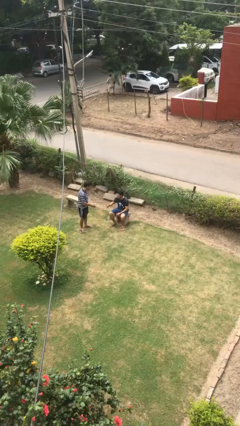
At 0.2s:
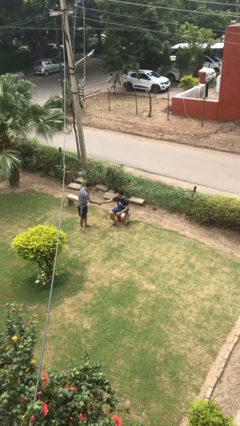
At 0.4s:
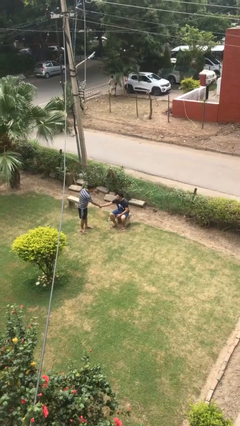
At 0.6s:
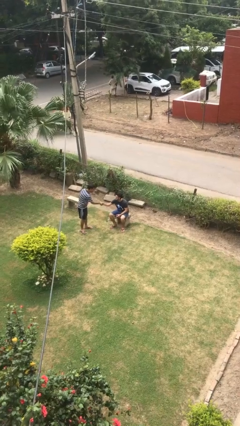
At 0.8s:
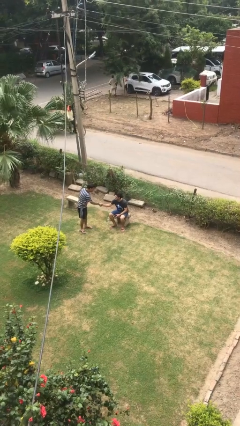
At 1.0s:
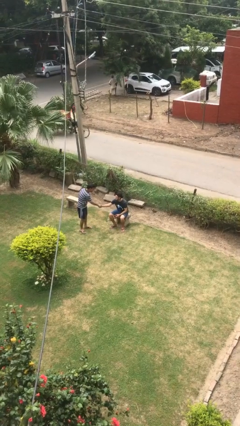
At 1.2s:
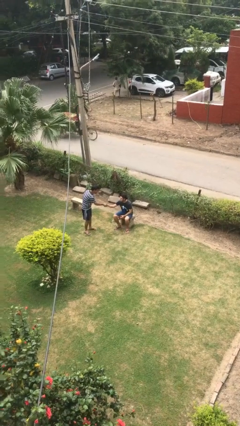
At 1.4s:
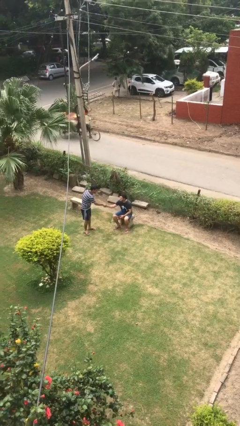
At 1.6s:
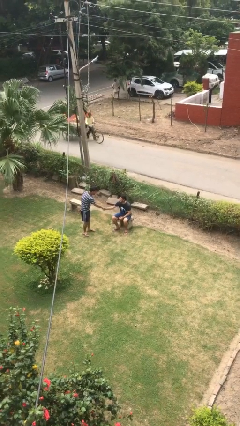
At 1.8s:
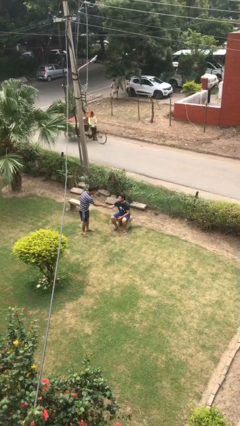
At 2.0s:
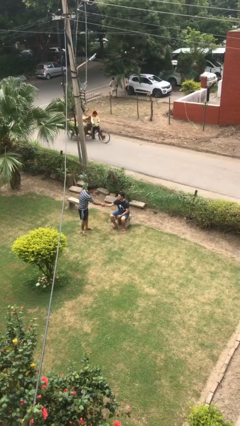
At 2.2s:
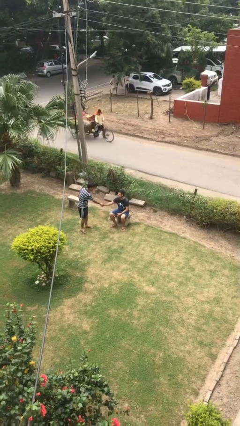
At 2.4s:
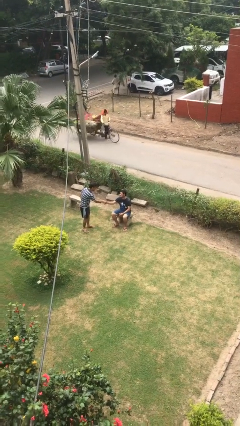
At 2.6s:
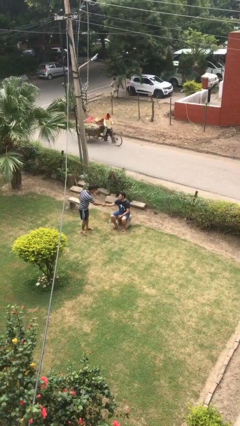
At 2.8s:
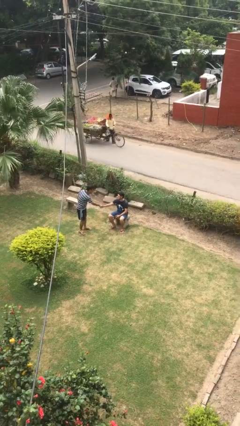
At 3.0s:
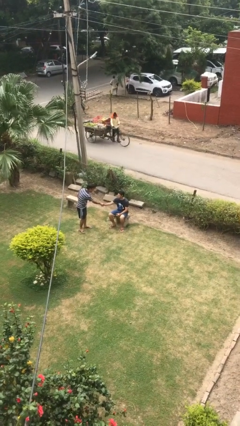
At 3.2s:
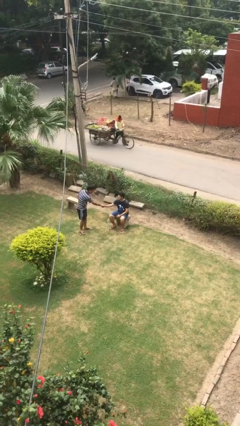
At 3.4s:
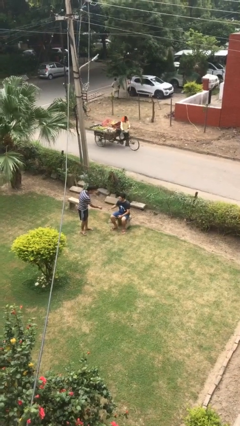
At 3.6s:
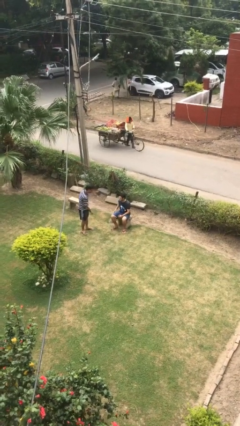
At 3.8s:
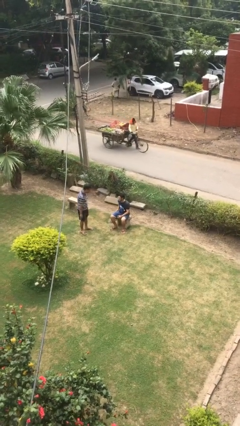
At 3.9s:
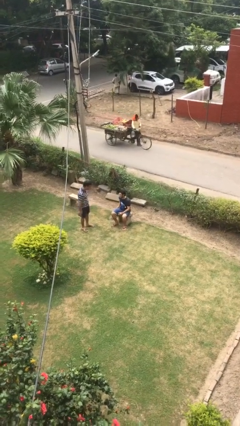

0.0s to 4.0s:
person shakes hand

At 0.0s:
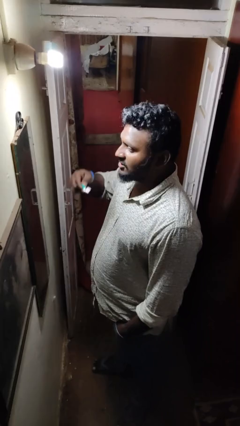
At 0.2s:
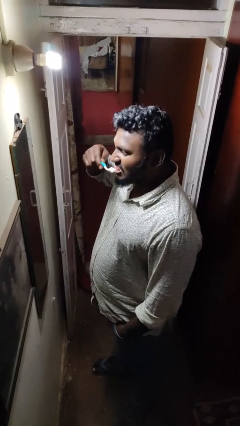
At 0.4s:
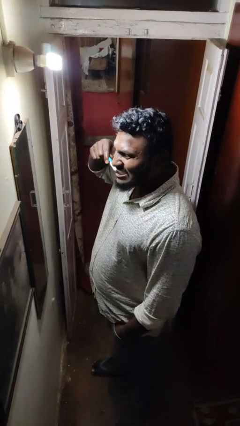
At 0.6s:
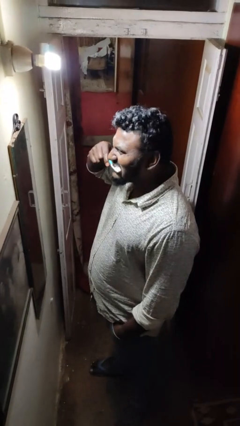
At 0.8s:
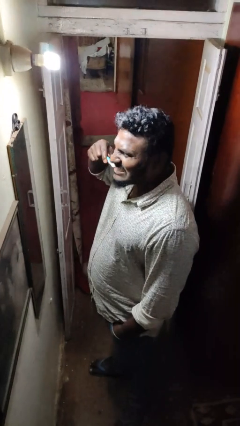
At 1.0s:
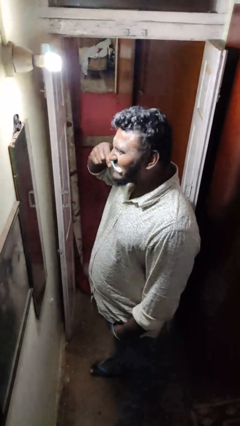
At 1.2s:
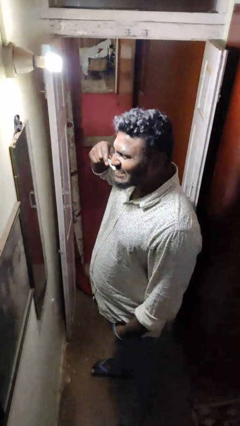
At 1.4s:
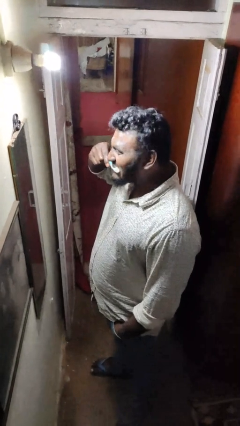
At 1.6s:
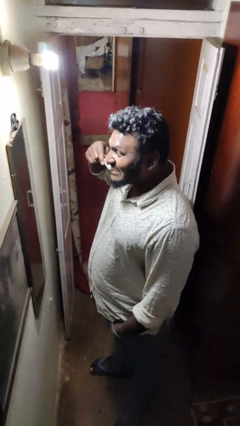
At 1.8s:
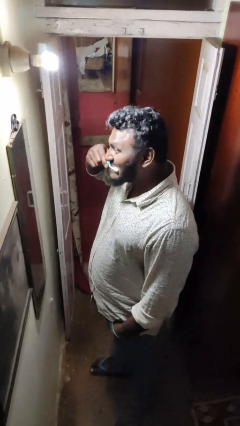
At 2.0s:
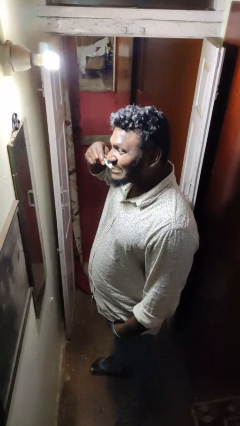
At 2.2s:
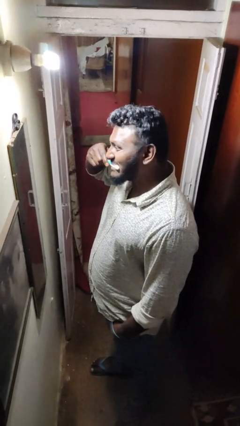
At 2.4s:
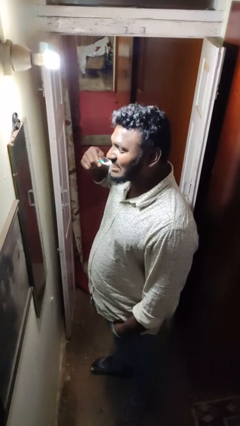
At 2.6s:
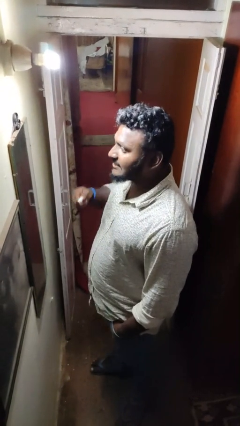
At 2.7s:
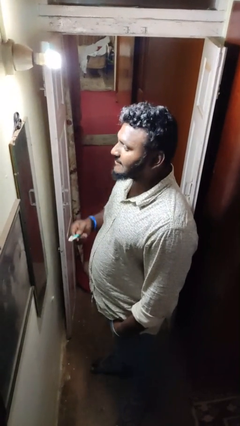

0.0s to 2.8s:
person brushes teeth

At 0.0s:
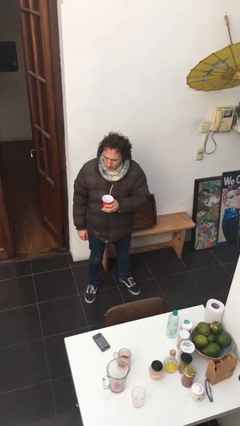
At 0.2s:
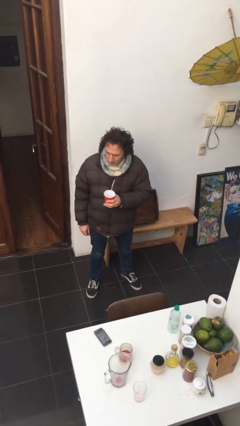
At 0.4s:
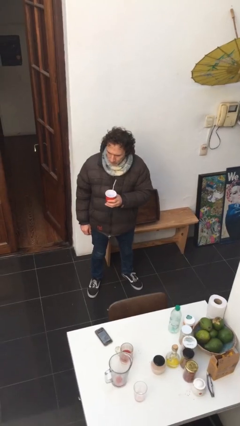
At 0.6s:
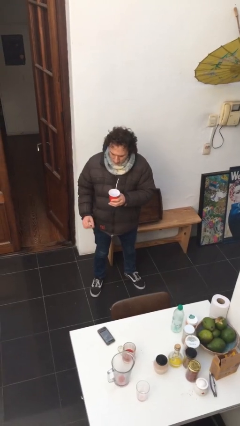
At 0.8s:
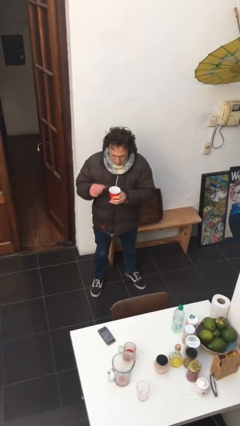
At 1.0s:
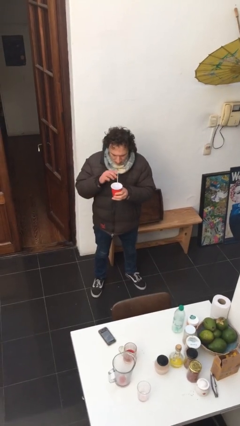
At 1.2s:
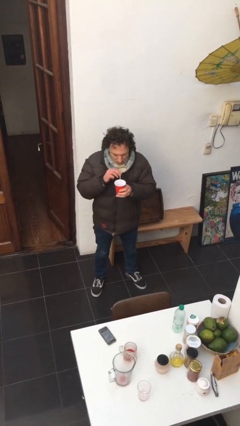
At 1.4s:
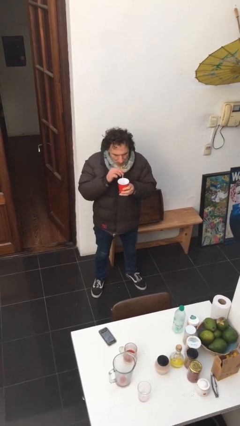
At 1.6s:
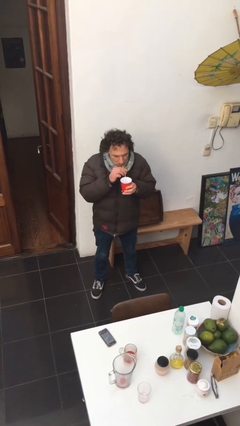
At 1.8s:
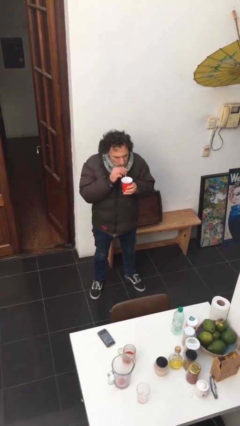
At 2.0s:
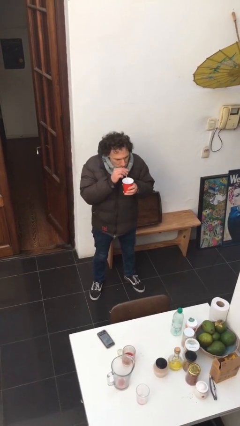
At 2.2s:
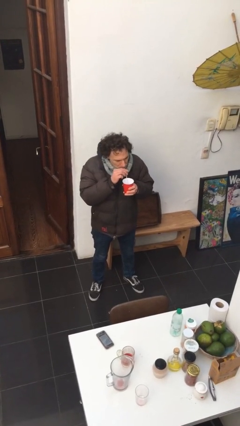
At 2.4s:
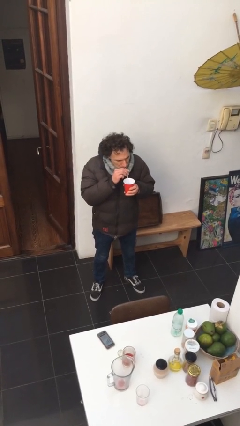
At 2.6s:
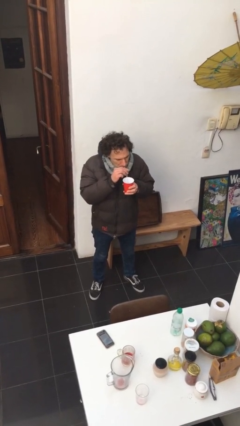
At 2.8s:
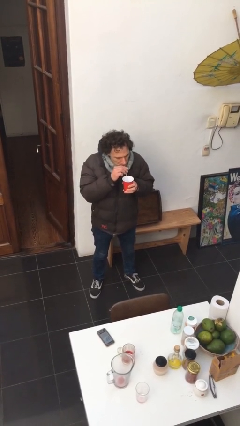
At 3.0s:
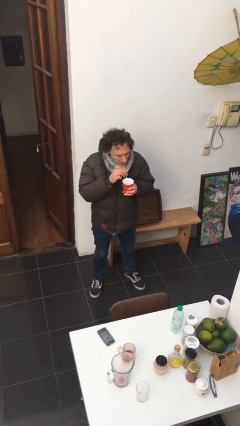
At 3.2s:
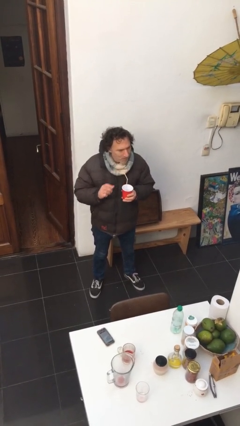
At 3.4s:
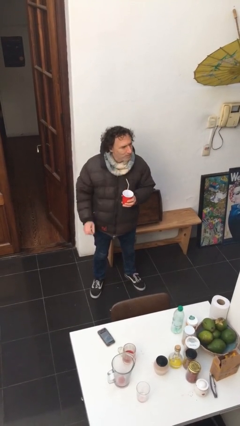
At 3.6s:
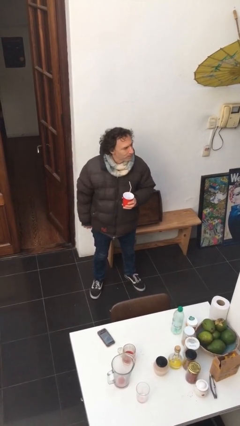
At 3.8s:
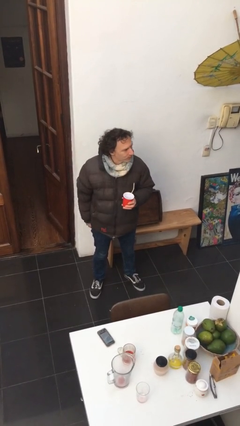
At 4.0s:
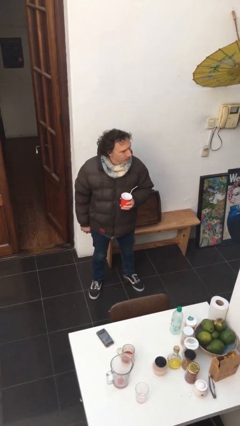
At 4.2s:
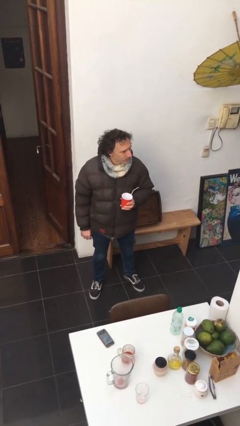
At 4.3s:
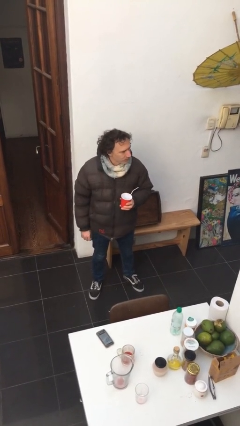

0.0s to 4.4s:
person drinks from straw

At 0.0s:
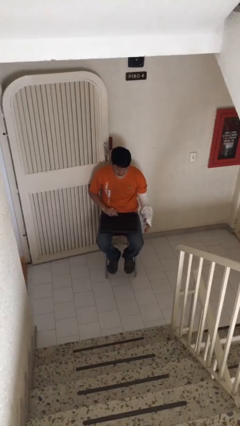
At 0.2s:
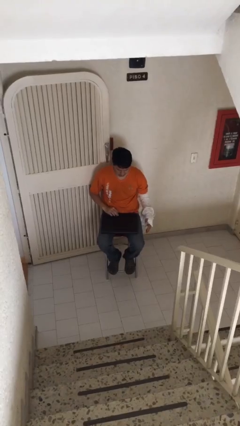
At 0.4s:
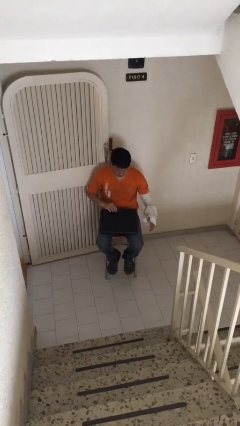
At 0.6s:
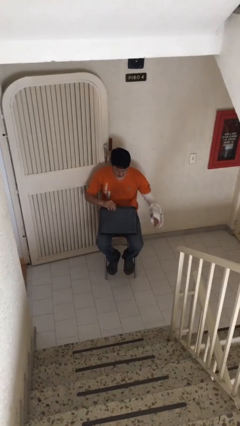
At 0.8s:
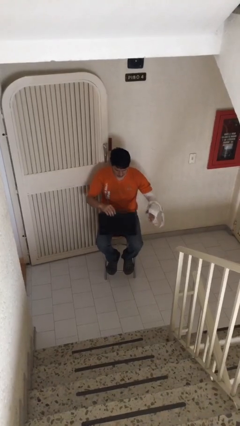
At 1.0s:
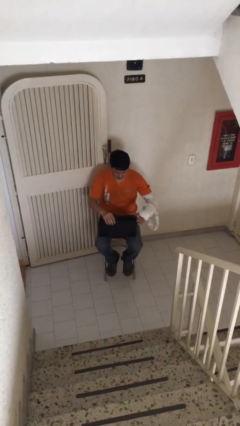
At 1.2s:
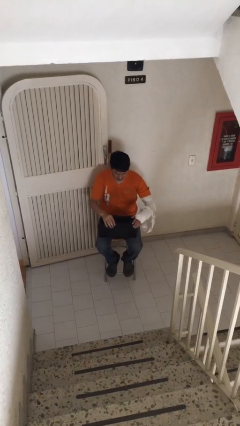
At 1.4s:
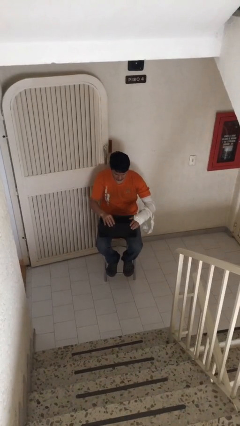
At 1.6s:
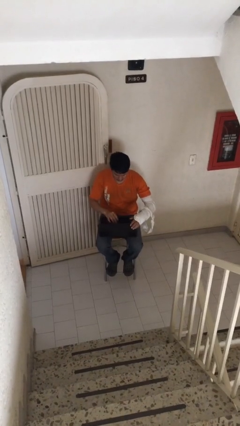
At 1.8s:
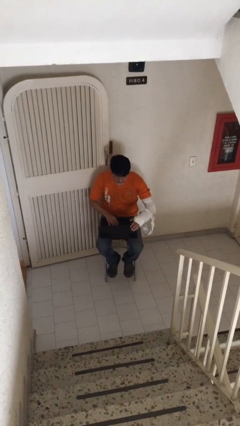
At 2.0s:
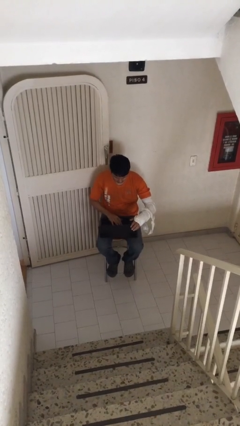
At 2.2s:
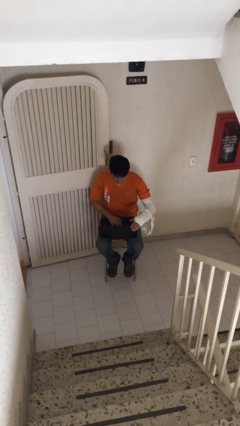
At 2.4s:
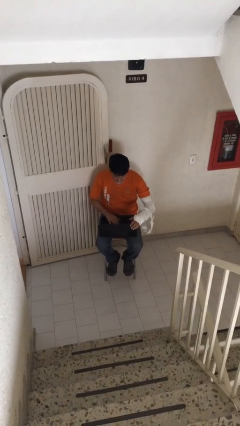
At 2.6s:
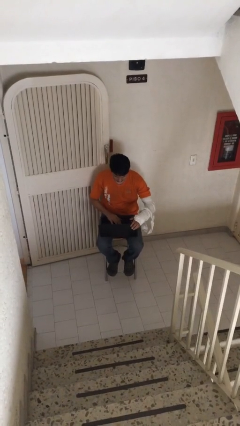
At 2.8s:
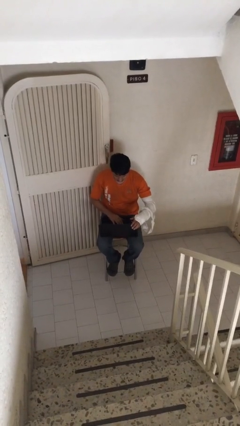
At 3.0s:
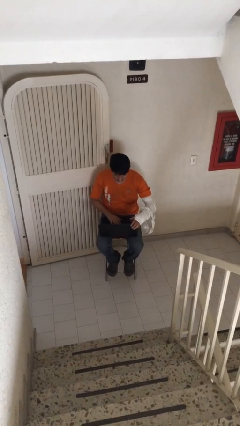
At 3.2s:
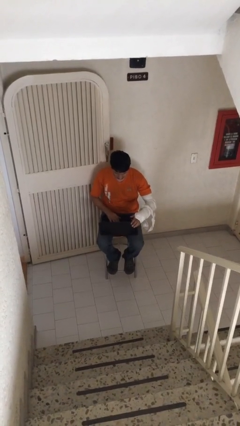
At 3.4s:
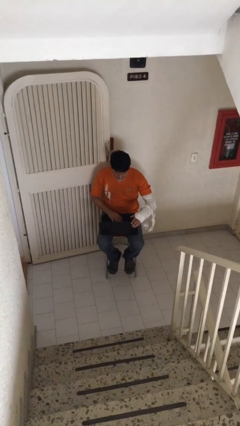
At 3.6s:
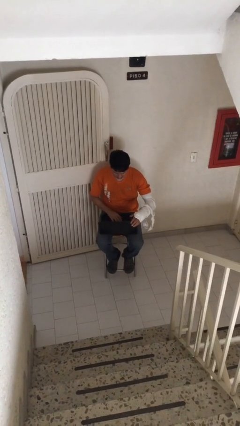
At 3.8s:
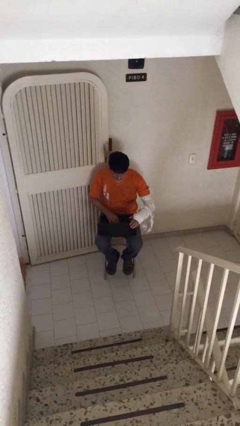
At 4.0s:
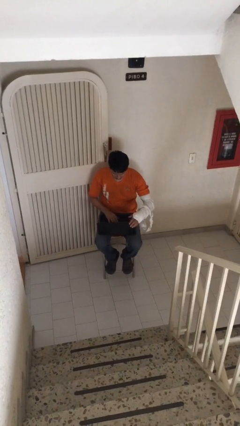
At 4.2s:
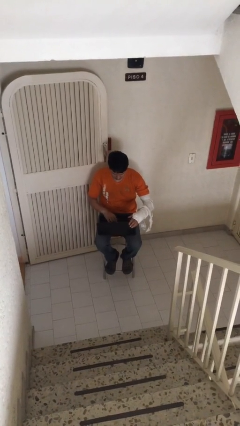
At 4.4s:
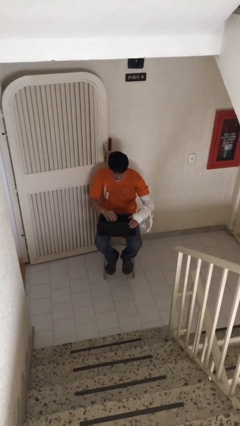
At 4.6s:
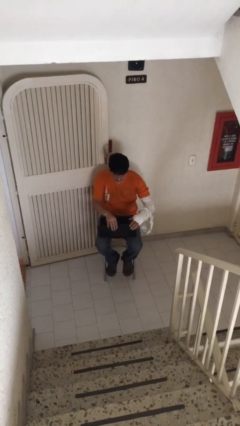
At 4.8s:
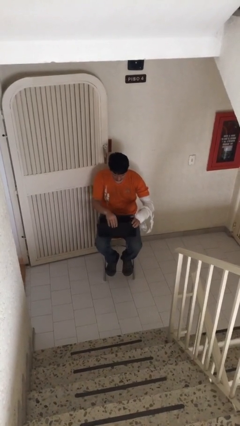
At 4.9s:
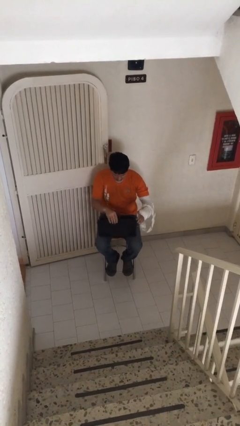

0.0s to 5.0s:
person interacts with laptop

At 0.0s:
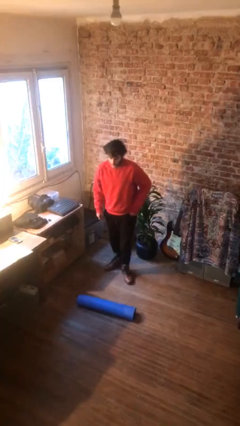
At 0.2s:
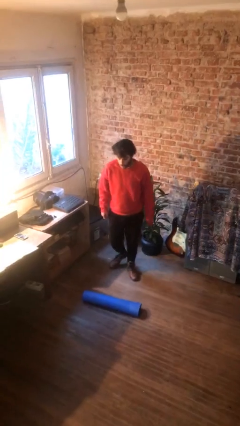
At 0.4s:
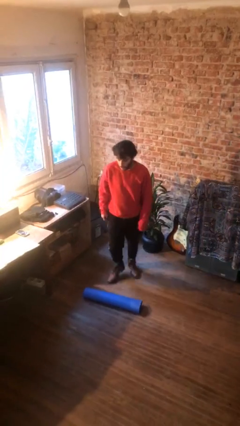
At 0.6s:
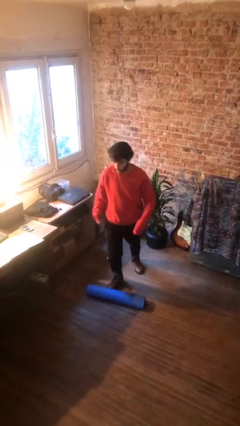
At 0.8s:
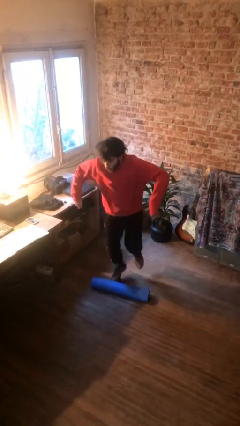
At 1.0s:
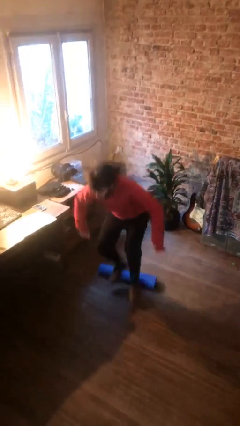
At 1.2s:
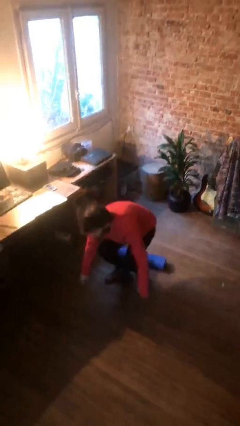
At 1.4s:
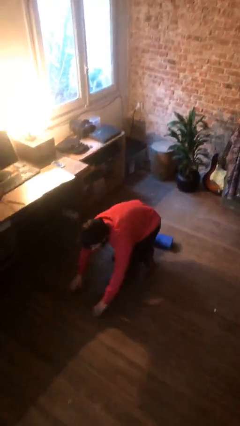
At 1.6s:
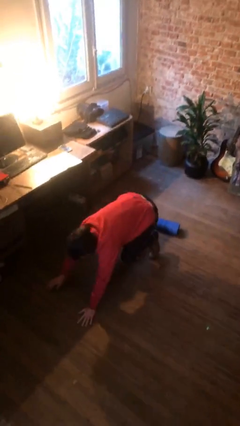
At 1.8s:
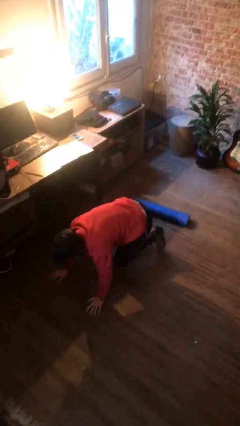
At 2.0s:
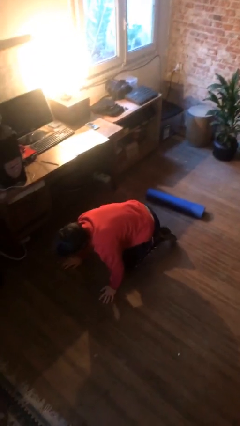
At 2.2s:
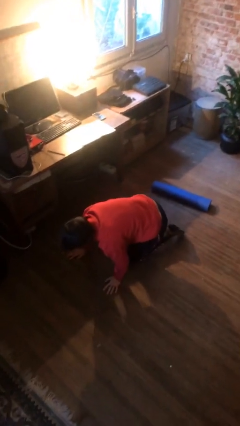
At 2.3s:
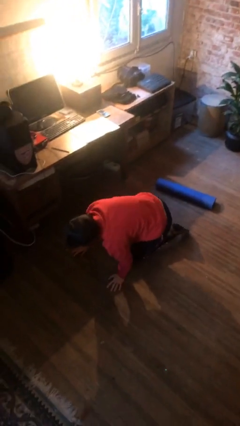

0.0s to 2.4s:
person trips on object on floor
